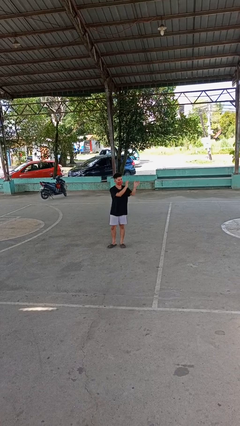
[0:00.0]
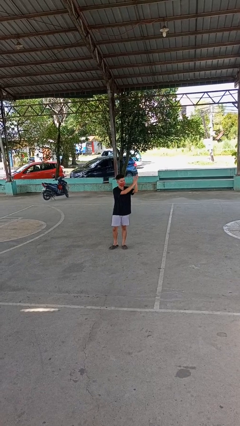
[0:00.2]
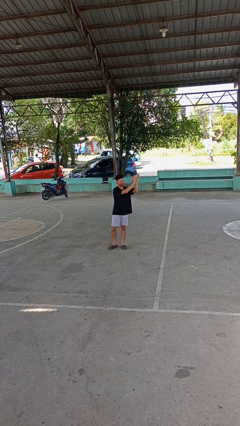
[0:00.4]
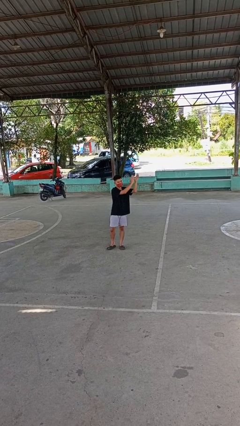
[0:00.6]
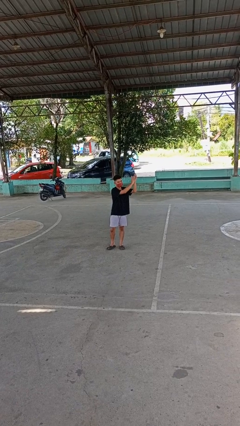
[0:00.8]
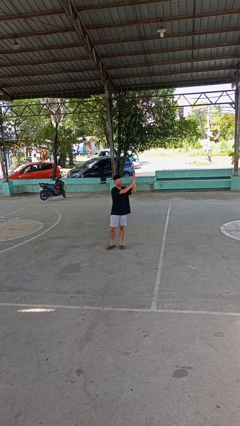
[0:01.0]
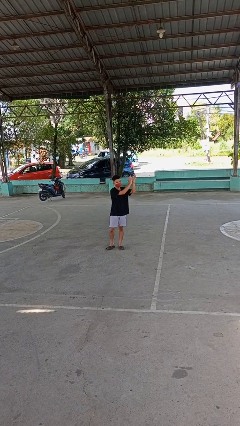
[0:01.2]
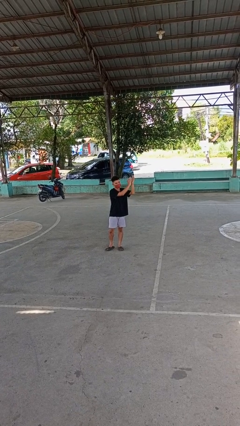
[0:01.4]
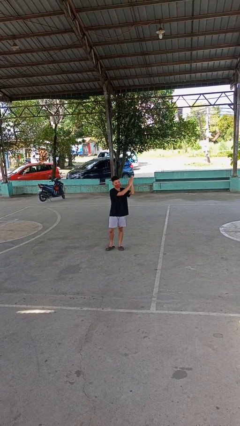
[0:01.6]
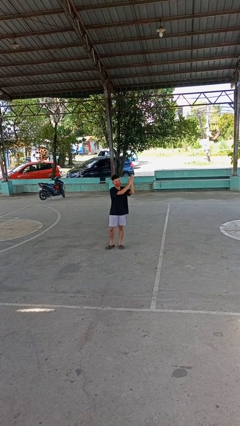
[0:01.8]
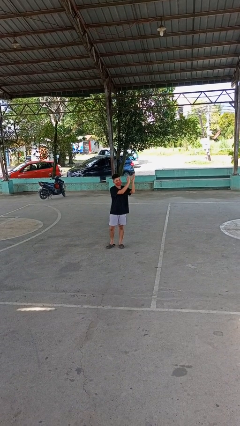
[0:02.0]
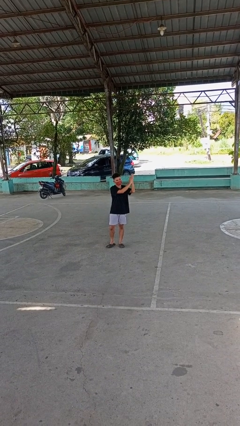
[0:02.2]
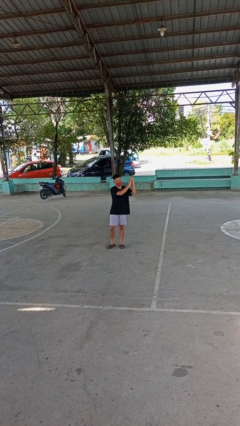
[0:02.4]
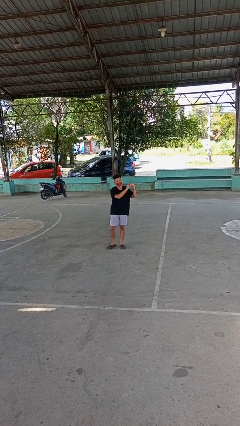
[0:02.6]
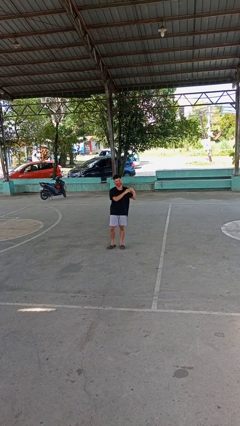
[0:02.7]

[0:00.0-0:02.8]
person claps hands

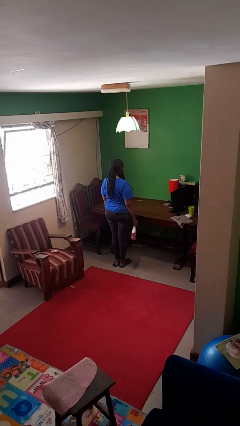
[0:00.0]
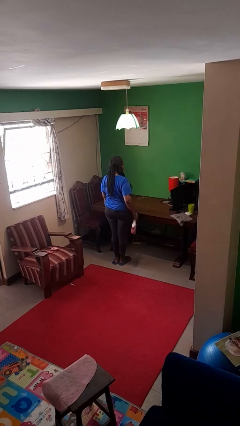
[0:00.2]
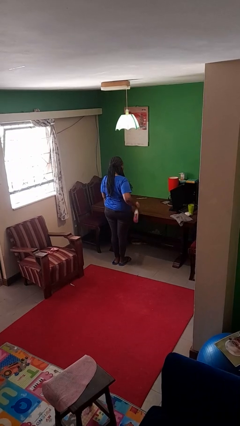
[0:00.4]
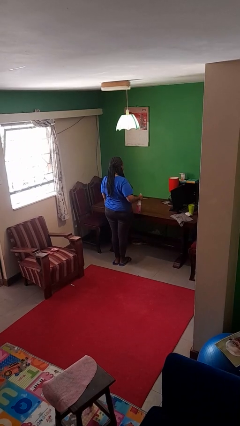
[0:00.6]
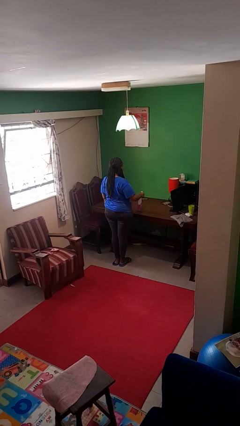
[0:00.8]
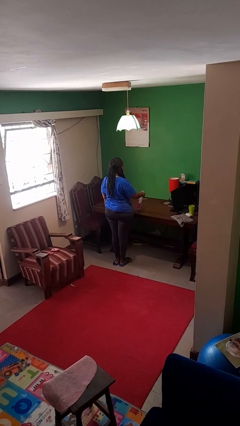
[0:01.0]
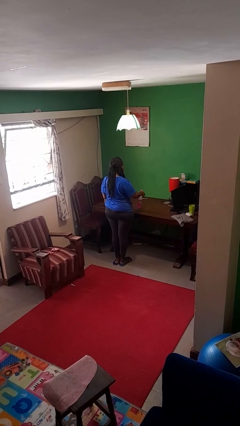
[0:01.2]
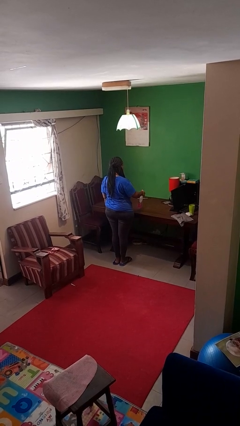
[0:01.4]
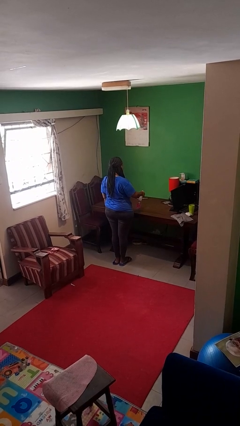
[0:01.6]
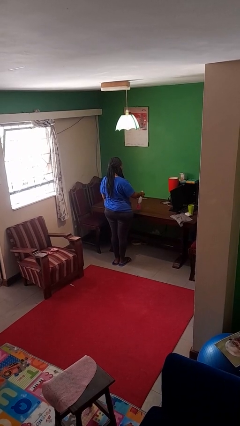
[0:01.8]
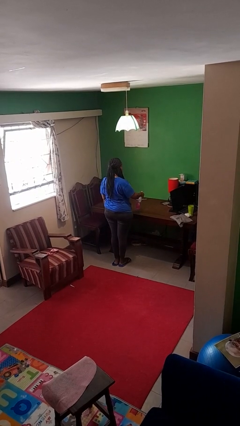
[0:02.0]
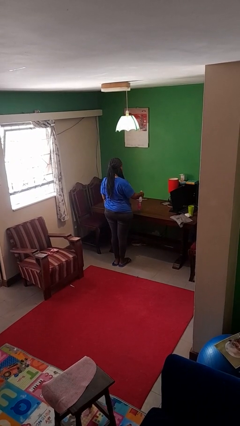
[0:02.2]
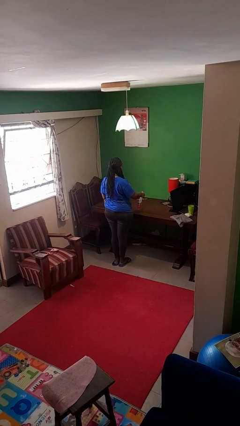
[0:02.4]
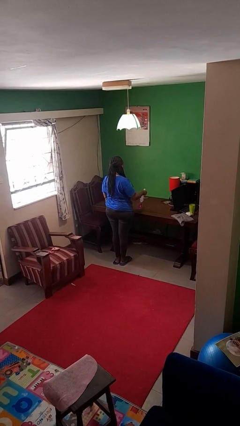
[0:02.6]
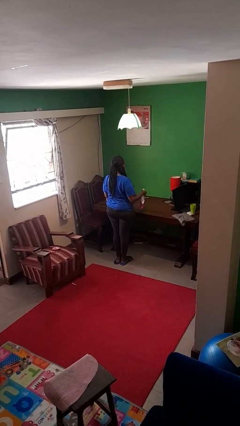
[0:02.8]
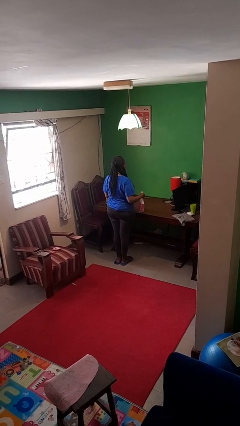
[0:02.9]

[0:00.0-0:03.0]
person sprays from bottle

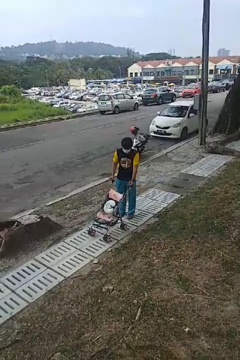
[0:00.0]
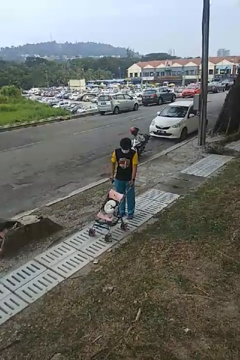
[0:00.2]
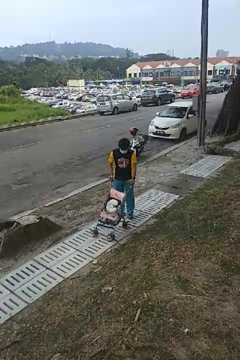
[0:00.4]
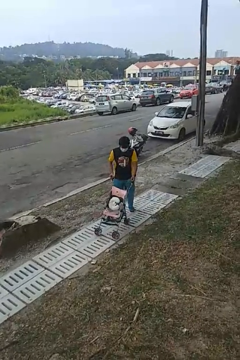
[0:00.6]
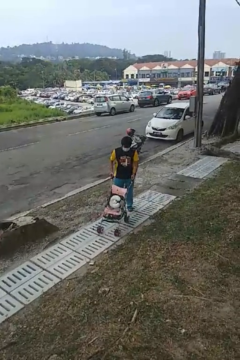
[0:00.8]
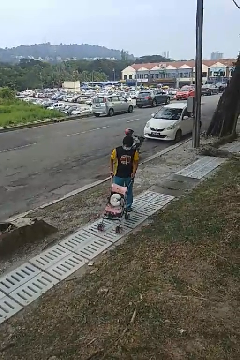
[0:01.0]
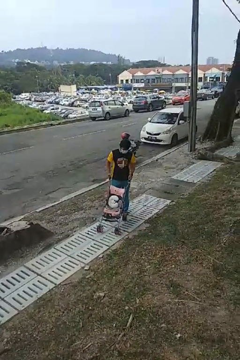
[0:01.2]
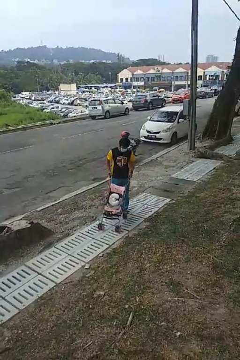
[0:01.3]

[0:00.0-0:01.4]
person pulls wheeled cart

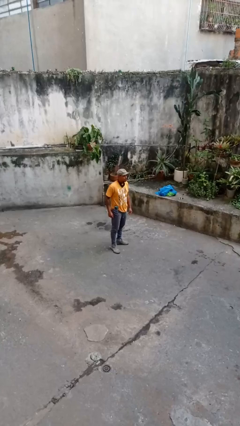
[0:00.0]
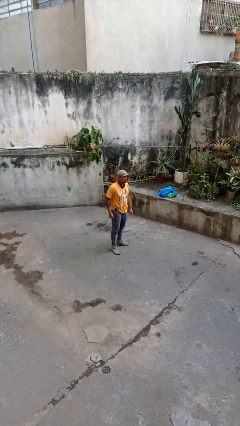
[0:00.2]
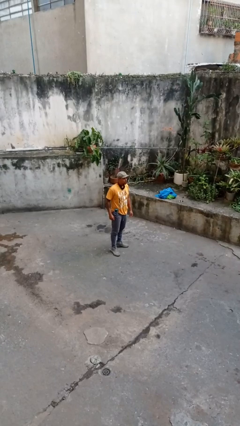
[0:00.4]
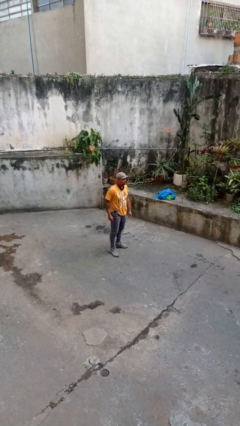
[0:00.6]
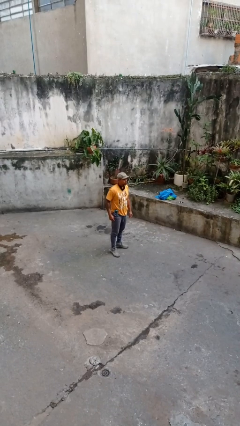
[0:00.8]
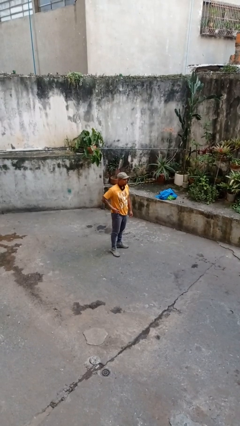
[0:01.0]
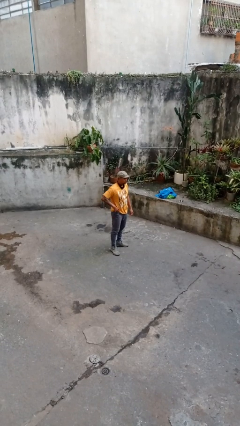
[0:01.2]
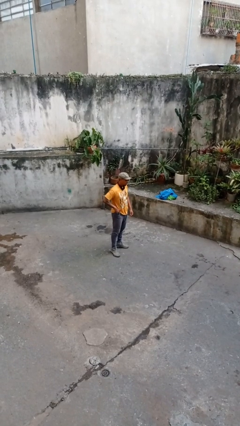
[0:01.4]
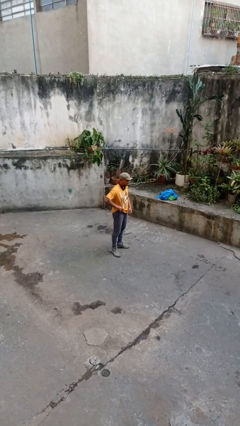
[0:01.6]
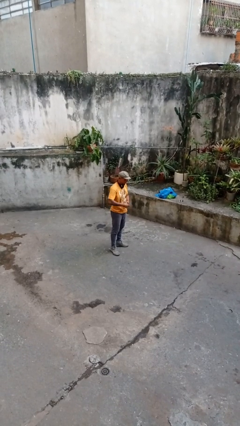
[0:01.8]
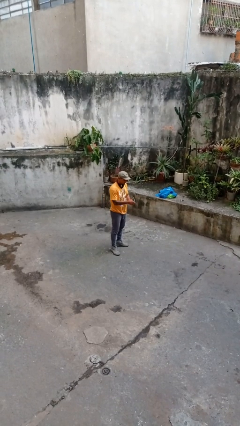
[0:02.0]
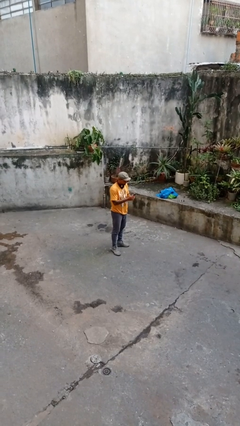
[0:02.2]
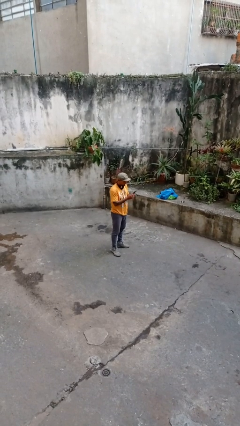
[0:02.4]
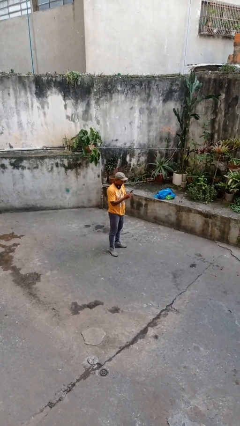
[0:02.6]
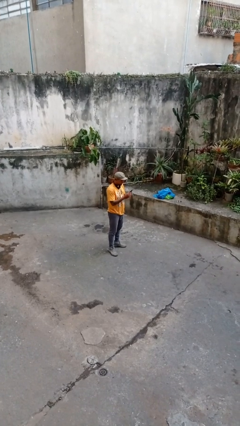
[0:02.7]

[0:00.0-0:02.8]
person takes phone from pocket

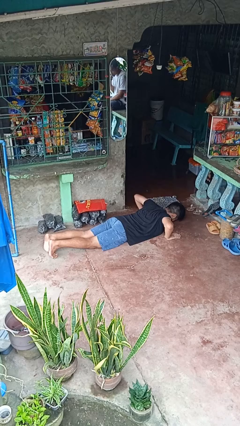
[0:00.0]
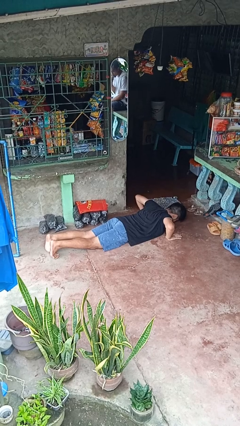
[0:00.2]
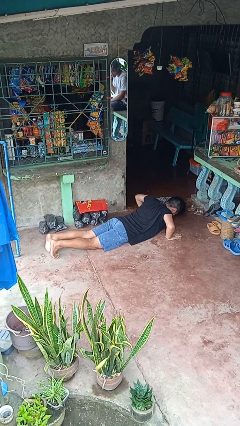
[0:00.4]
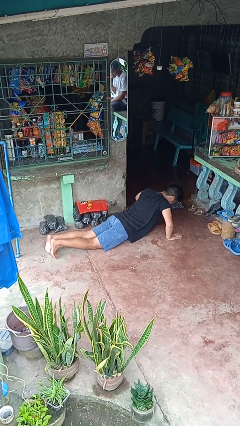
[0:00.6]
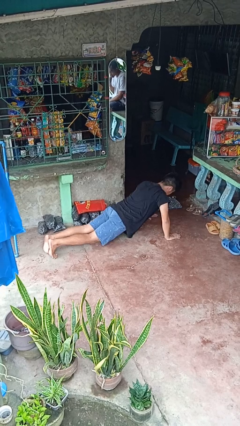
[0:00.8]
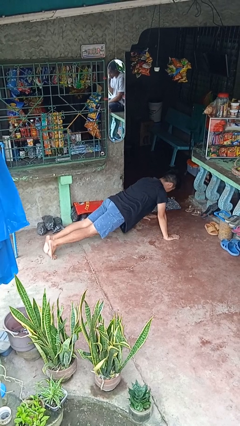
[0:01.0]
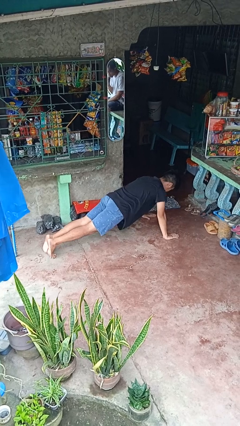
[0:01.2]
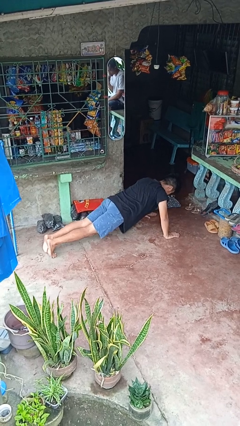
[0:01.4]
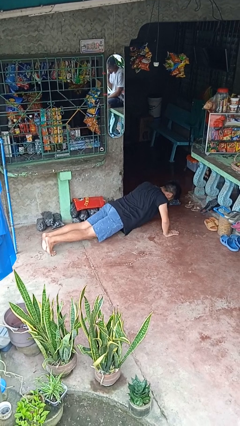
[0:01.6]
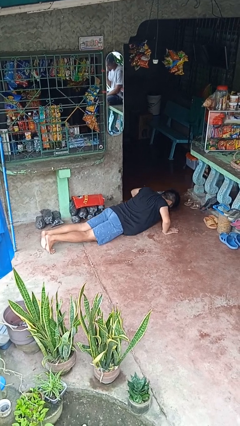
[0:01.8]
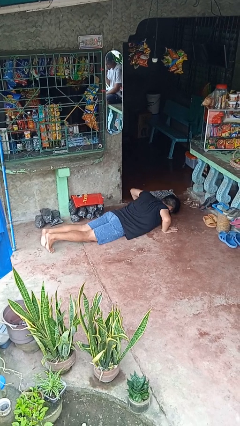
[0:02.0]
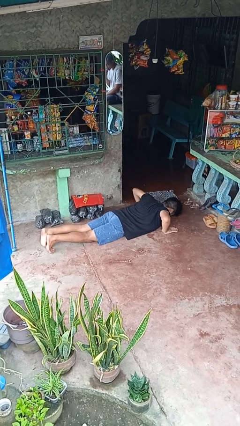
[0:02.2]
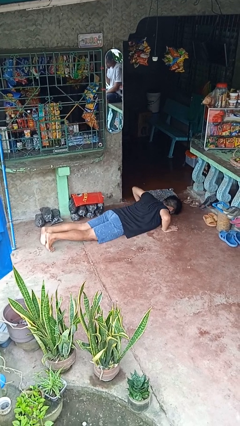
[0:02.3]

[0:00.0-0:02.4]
person exercises with pushup

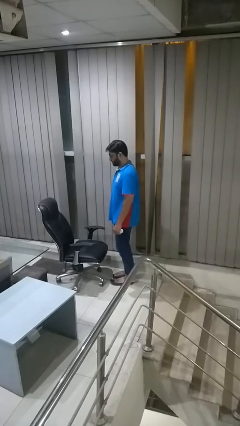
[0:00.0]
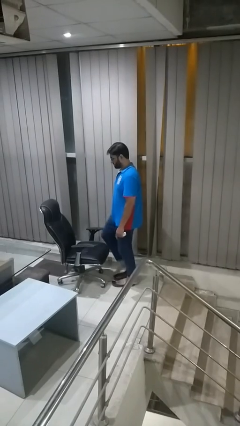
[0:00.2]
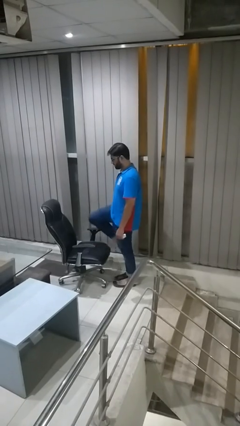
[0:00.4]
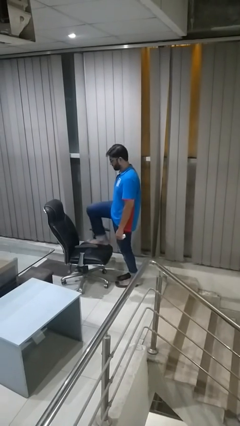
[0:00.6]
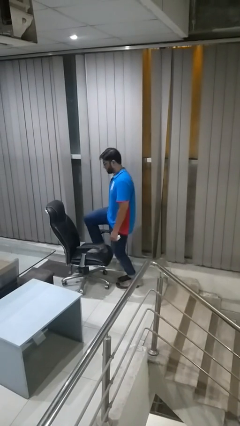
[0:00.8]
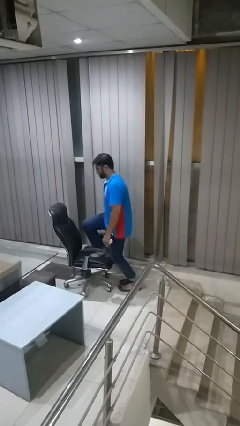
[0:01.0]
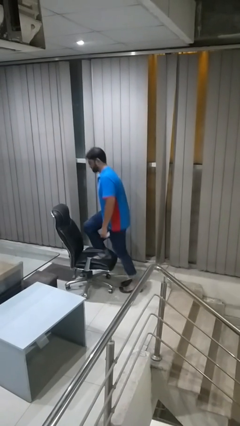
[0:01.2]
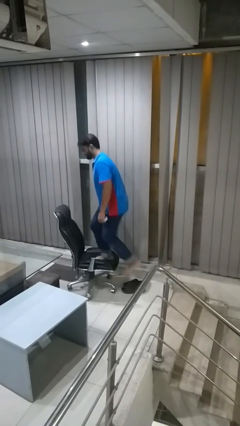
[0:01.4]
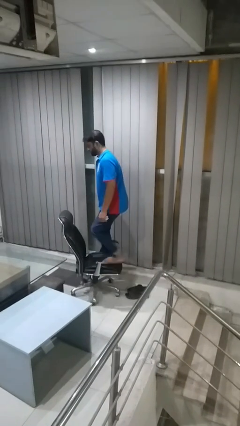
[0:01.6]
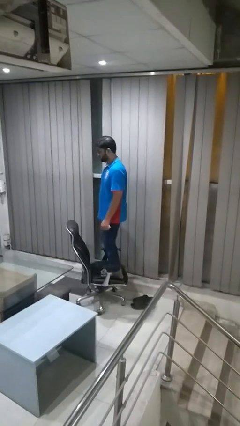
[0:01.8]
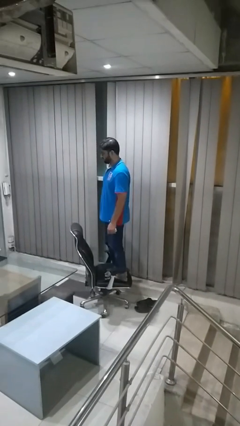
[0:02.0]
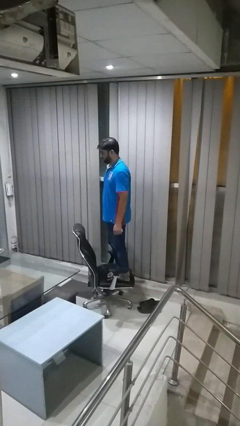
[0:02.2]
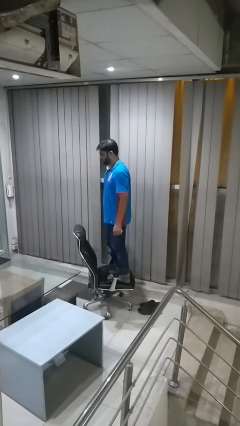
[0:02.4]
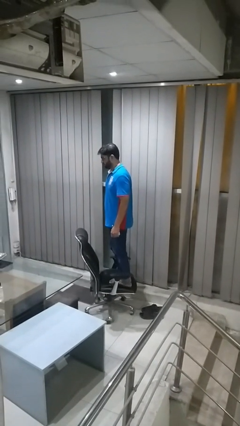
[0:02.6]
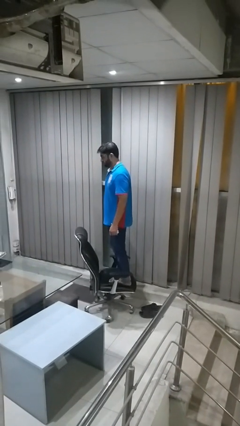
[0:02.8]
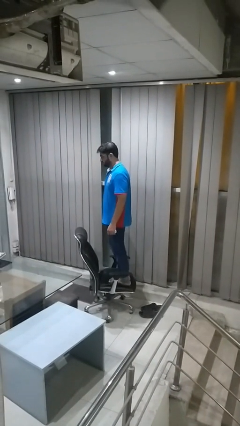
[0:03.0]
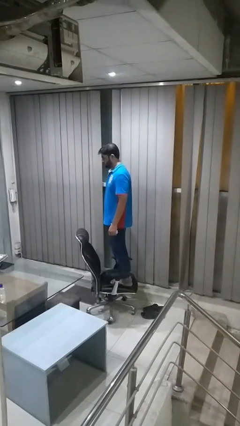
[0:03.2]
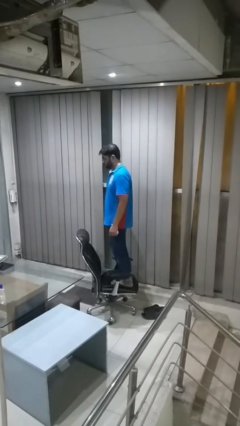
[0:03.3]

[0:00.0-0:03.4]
person climbs on chair

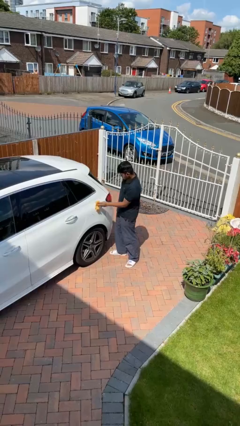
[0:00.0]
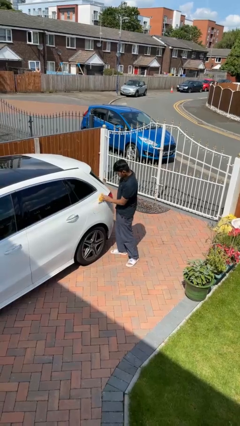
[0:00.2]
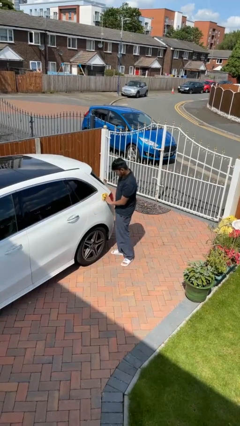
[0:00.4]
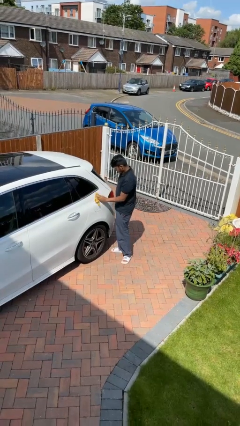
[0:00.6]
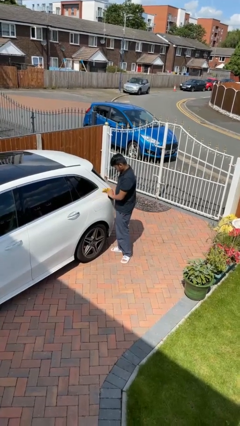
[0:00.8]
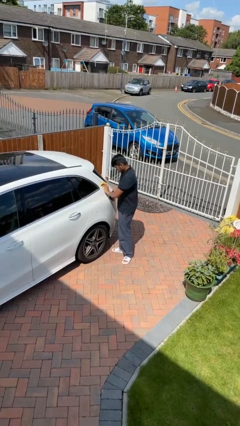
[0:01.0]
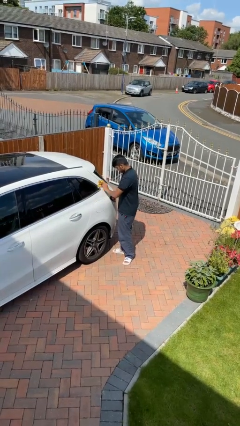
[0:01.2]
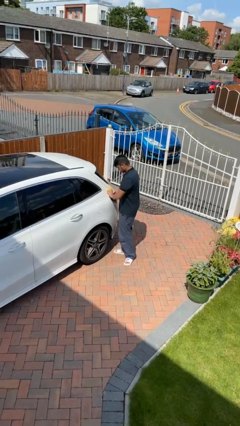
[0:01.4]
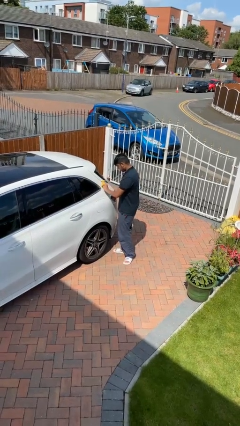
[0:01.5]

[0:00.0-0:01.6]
person polishes car with rag
